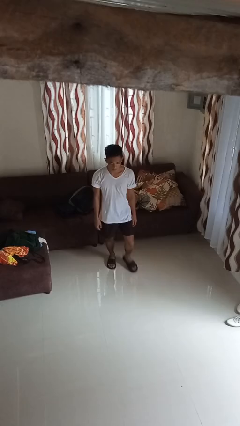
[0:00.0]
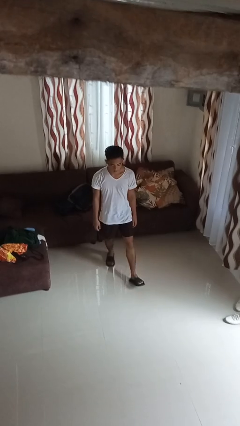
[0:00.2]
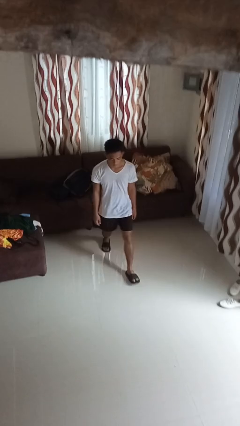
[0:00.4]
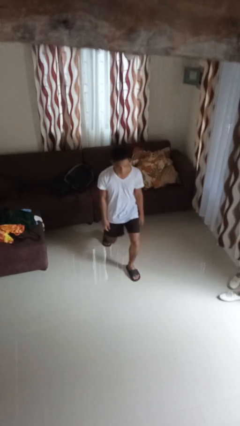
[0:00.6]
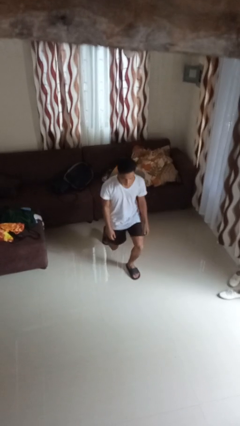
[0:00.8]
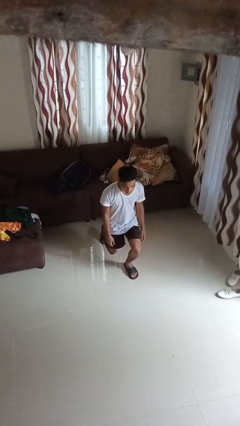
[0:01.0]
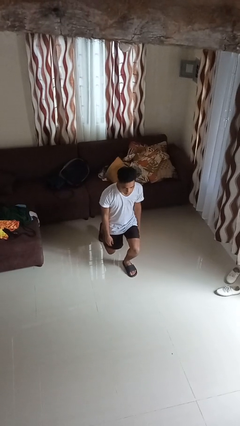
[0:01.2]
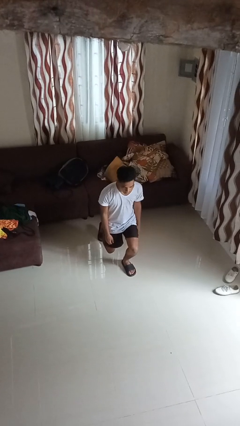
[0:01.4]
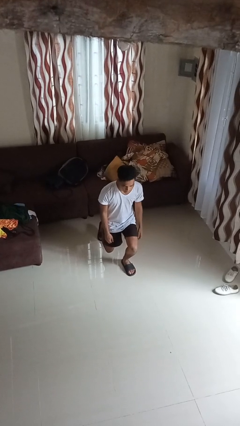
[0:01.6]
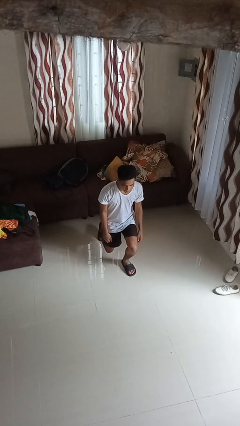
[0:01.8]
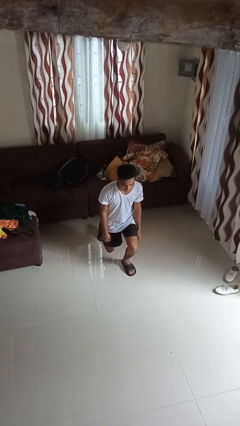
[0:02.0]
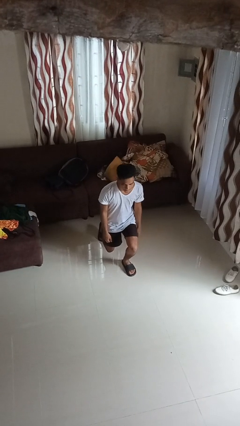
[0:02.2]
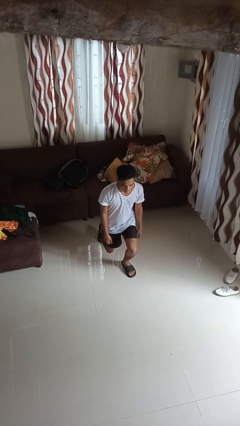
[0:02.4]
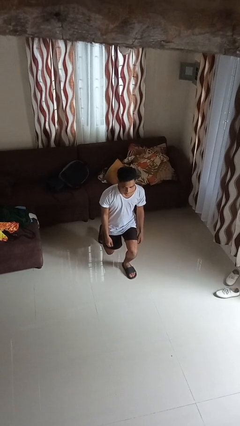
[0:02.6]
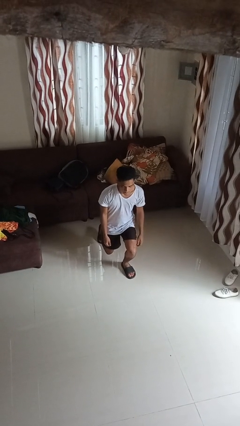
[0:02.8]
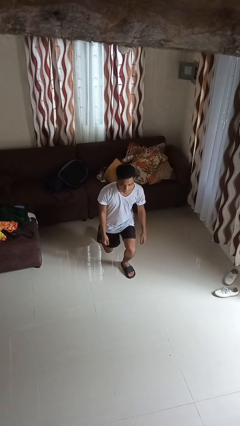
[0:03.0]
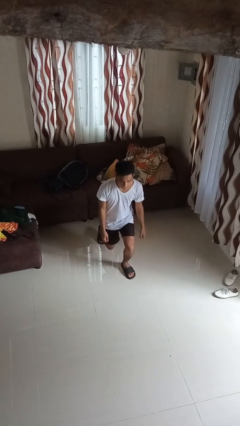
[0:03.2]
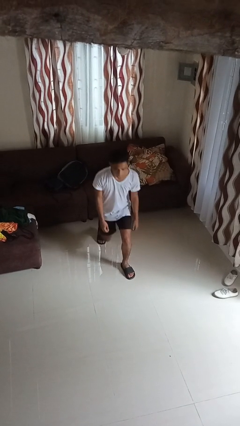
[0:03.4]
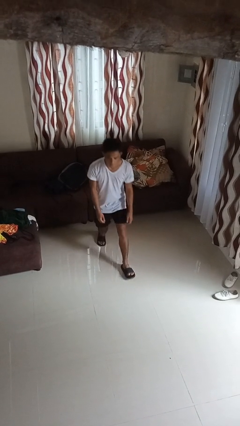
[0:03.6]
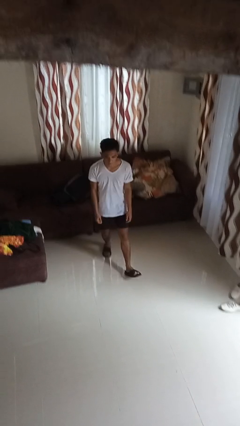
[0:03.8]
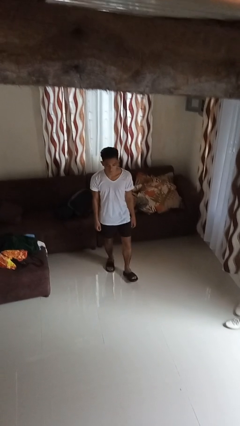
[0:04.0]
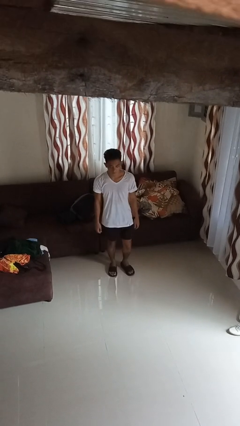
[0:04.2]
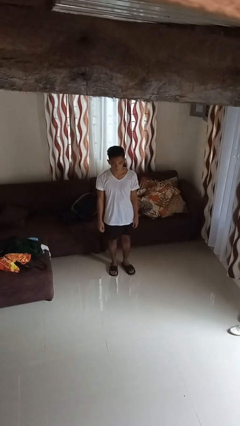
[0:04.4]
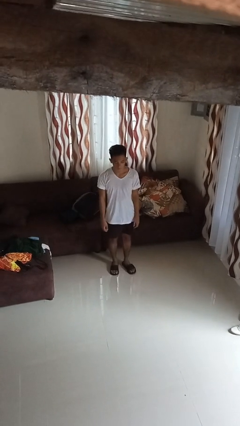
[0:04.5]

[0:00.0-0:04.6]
person exercises with lunges

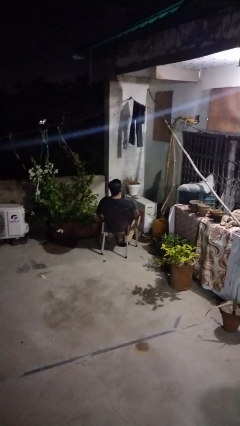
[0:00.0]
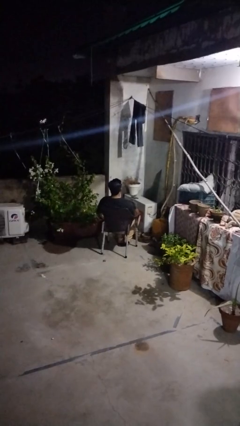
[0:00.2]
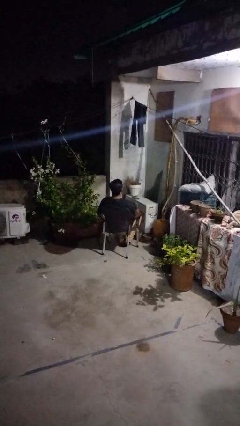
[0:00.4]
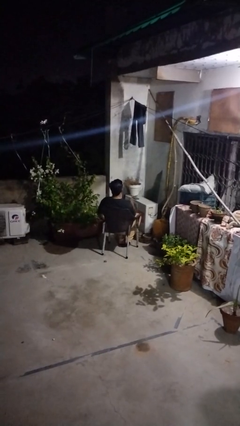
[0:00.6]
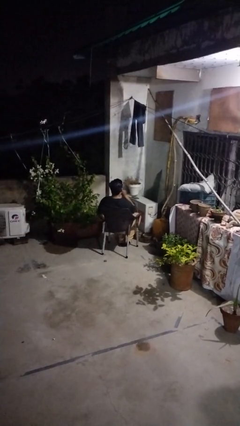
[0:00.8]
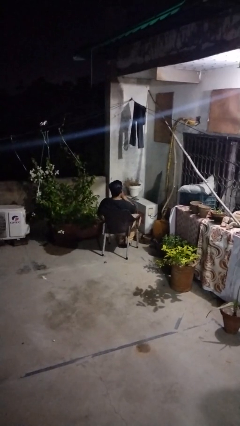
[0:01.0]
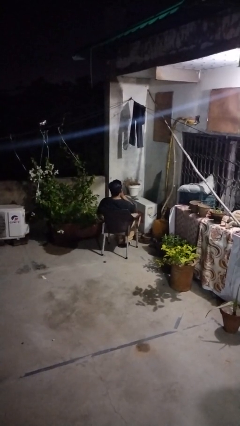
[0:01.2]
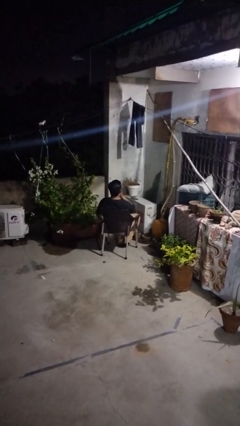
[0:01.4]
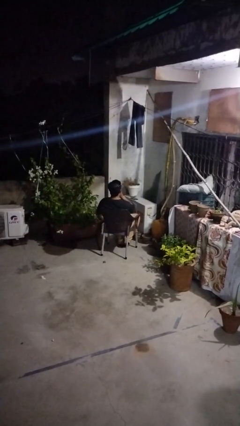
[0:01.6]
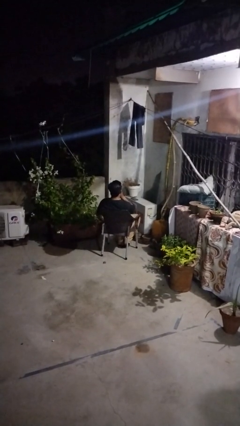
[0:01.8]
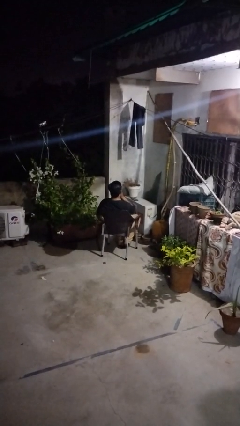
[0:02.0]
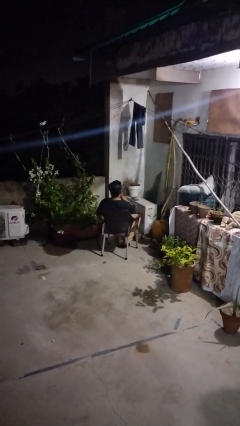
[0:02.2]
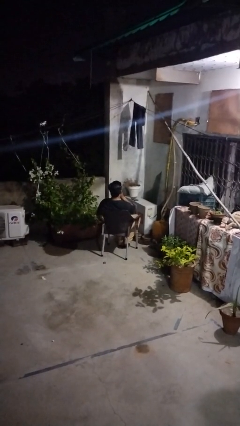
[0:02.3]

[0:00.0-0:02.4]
person gestures be quiet

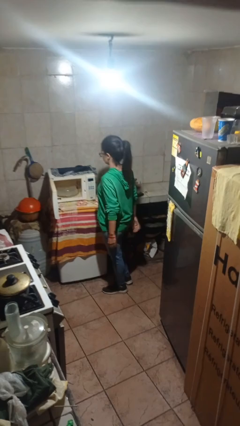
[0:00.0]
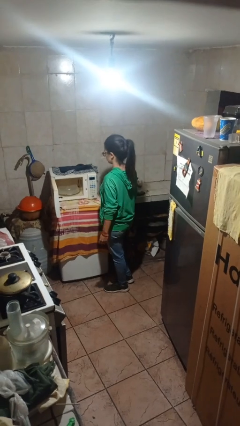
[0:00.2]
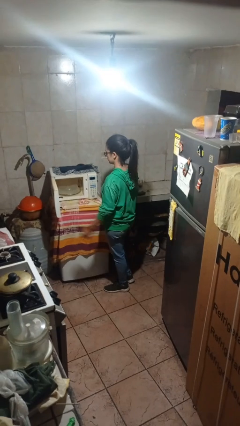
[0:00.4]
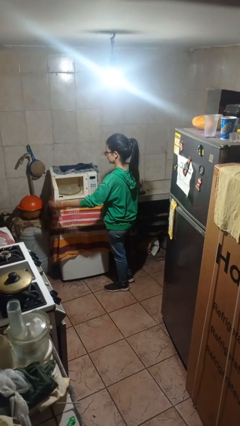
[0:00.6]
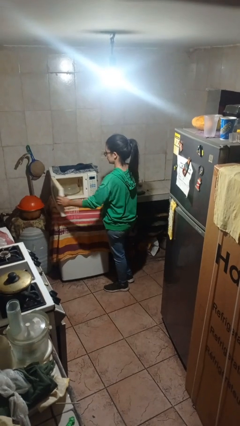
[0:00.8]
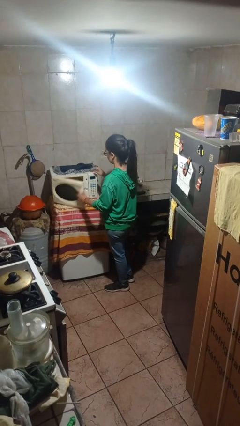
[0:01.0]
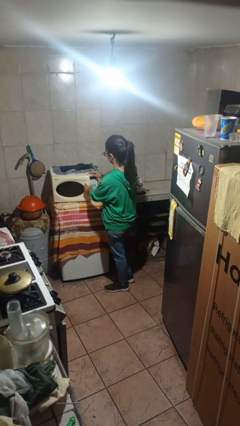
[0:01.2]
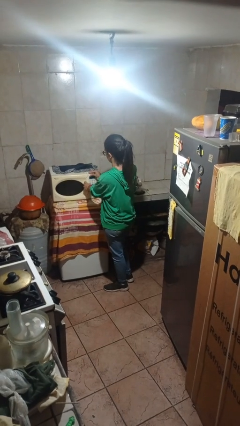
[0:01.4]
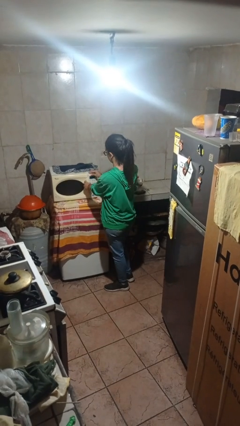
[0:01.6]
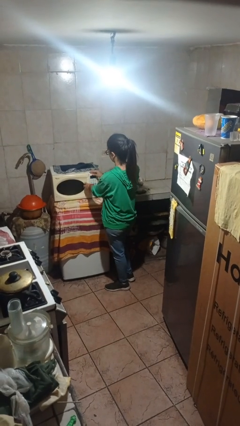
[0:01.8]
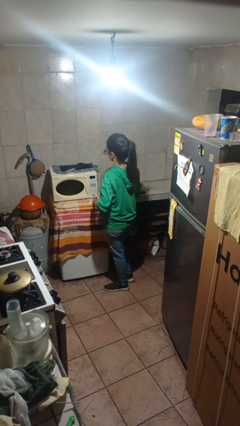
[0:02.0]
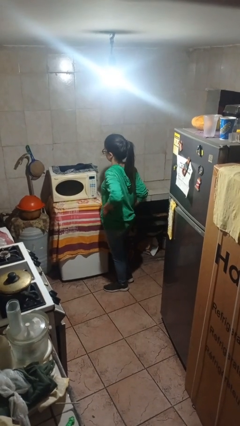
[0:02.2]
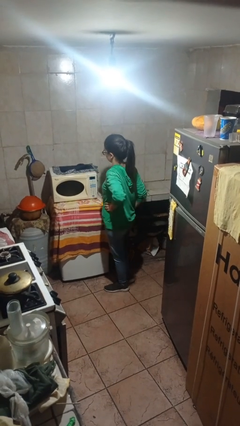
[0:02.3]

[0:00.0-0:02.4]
person closes microwave

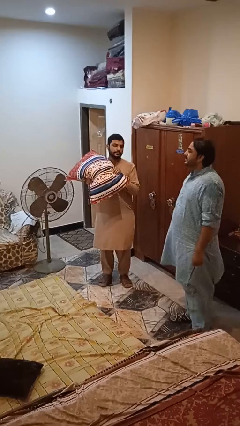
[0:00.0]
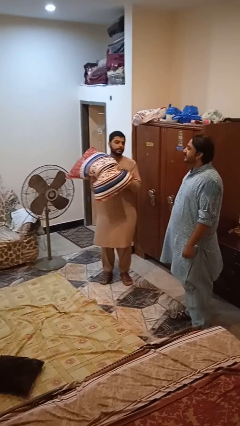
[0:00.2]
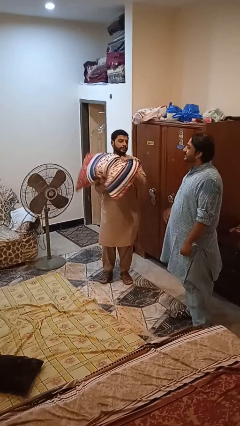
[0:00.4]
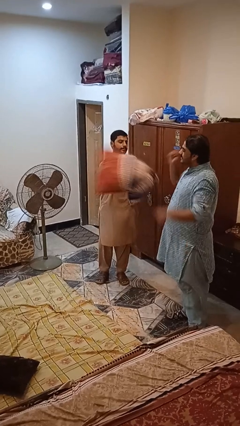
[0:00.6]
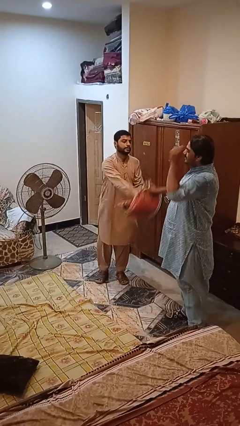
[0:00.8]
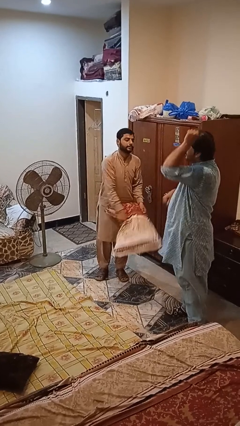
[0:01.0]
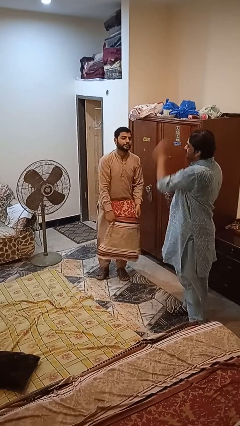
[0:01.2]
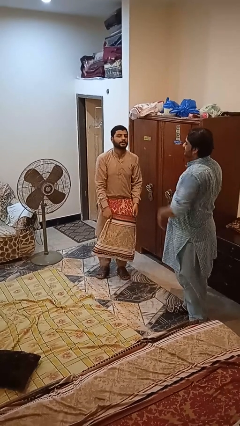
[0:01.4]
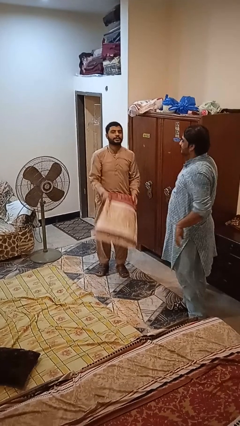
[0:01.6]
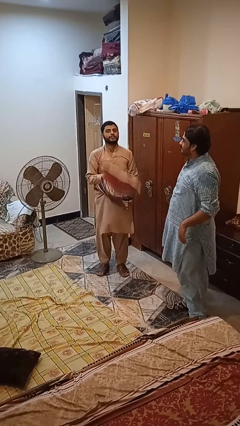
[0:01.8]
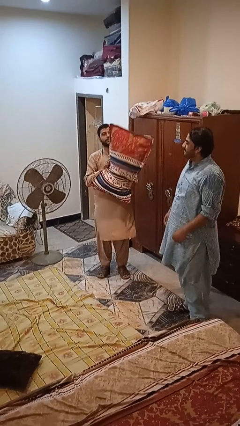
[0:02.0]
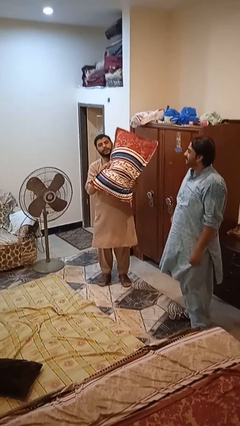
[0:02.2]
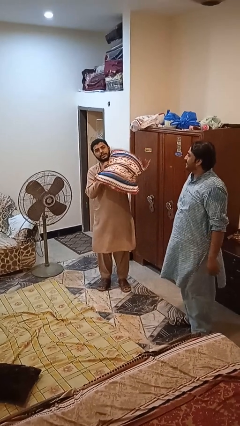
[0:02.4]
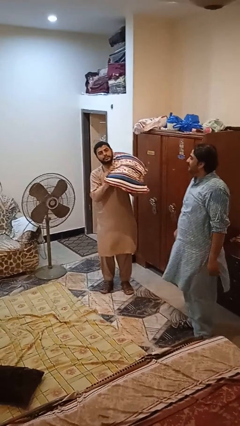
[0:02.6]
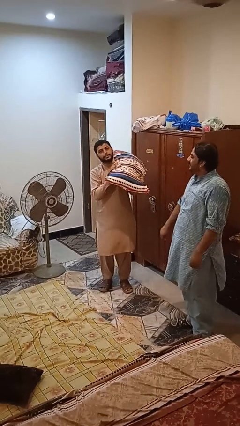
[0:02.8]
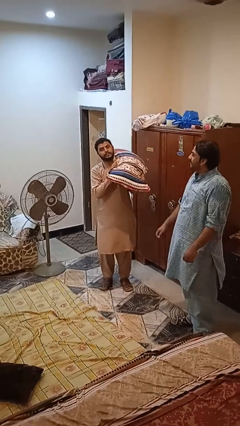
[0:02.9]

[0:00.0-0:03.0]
person hits person with pillow

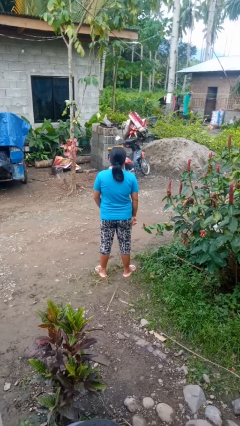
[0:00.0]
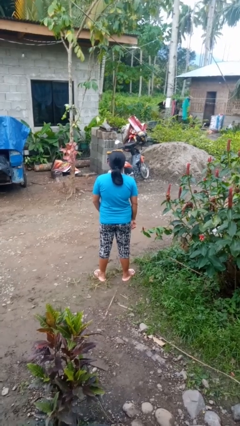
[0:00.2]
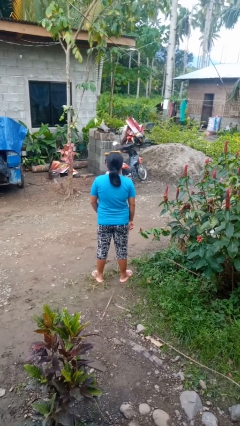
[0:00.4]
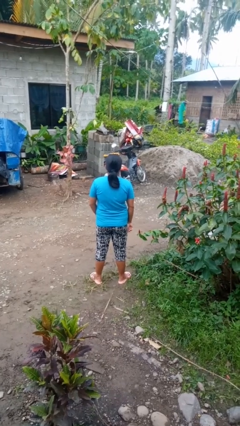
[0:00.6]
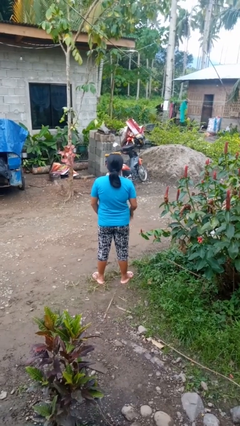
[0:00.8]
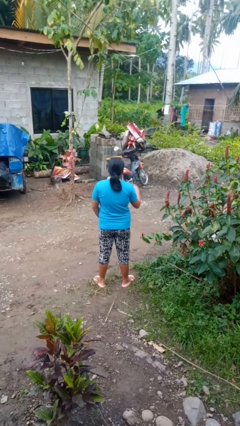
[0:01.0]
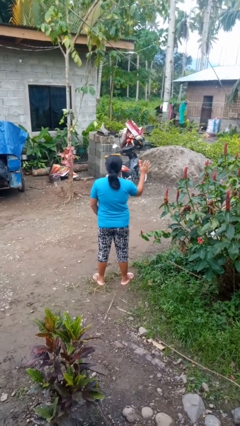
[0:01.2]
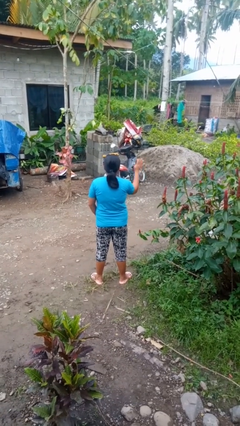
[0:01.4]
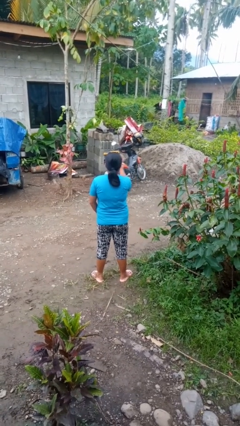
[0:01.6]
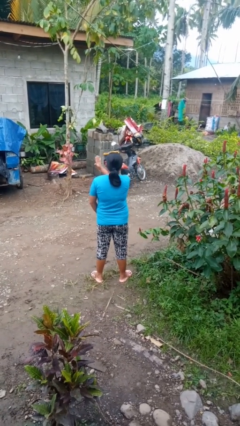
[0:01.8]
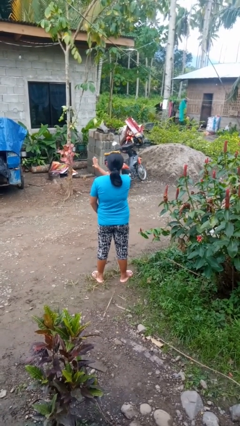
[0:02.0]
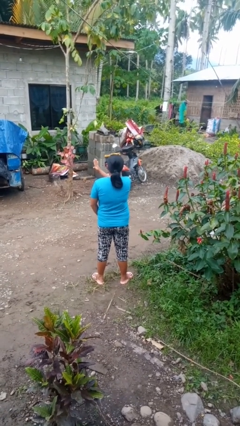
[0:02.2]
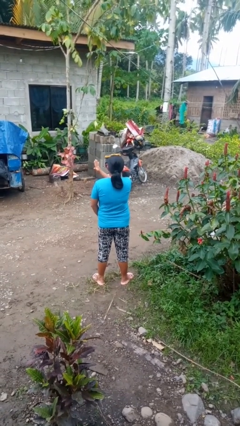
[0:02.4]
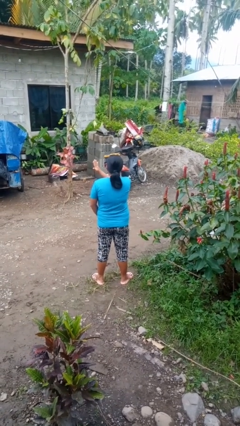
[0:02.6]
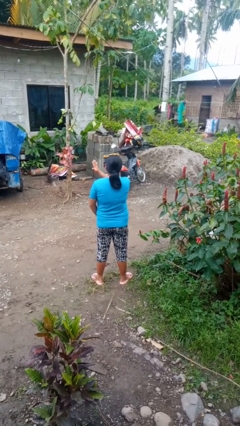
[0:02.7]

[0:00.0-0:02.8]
person gestures swipe left

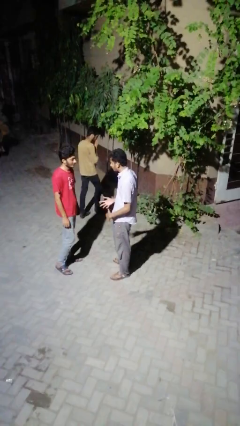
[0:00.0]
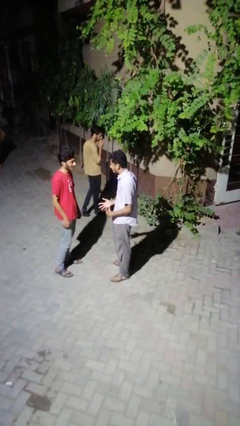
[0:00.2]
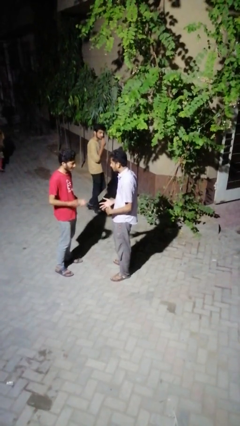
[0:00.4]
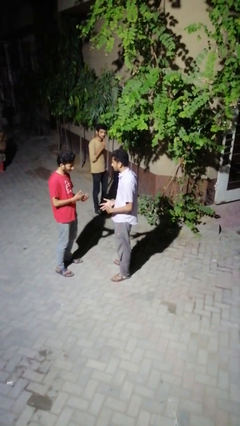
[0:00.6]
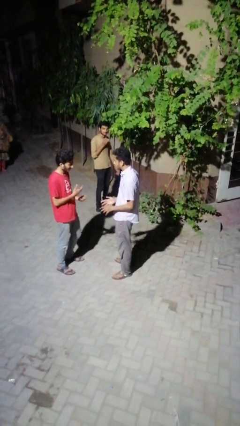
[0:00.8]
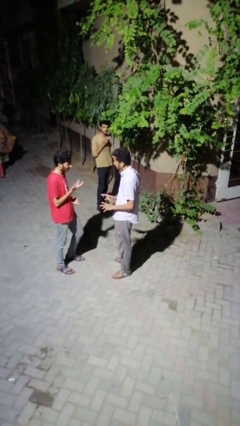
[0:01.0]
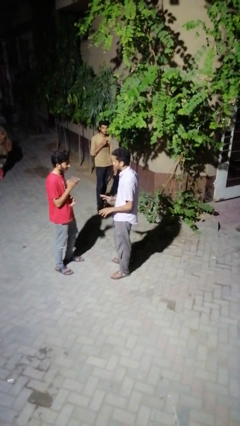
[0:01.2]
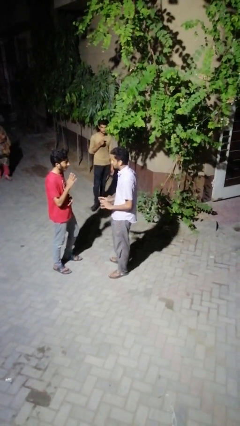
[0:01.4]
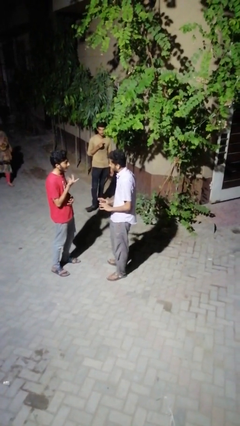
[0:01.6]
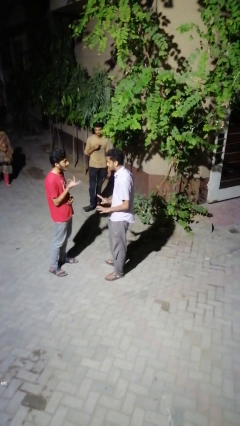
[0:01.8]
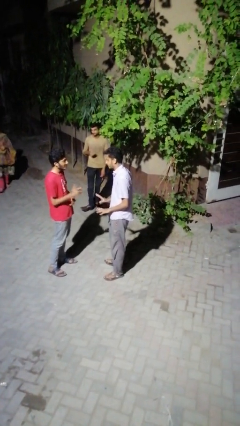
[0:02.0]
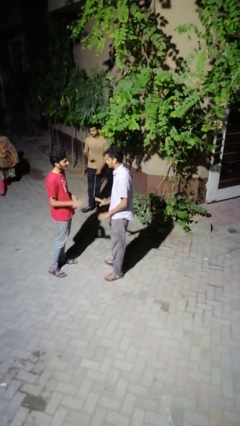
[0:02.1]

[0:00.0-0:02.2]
person talks to person
